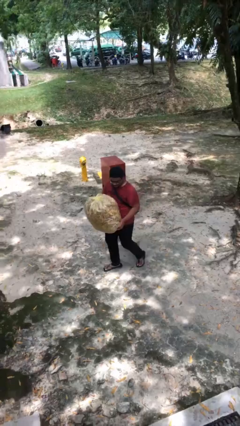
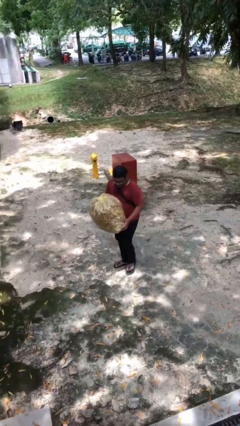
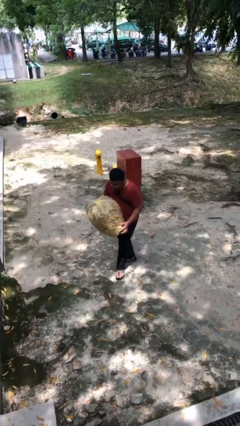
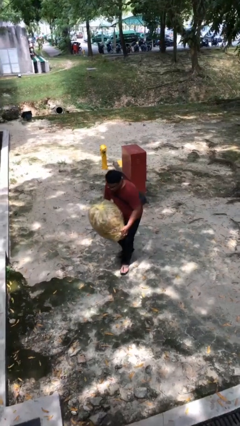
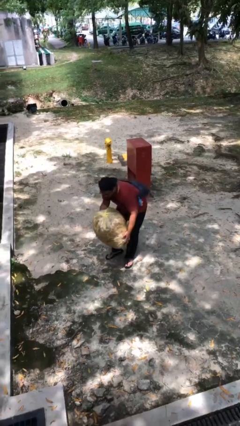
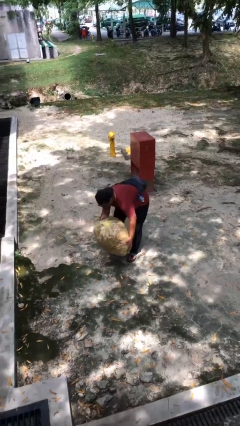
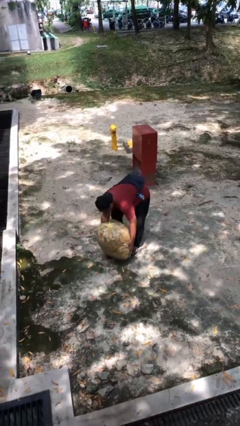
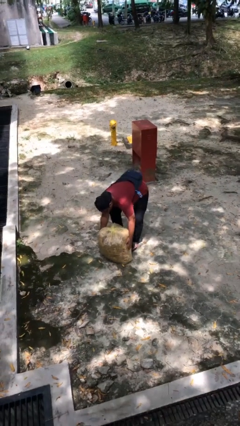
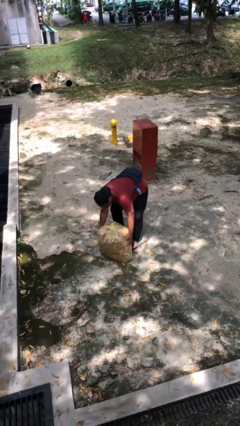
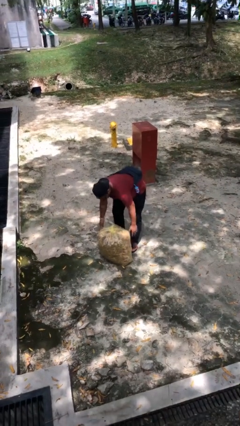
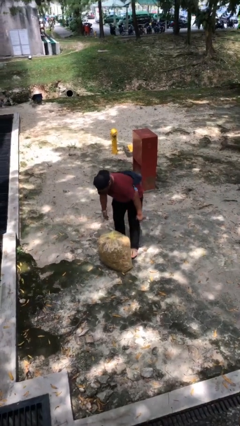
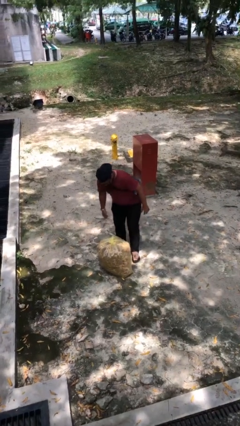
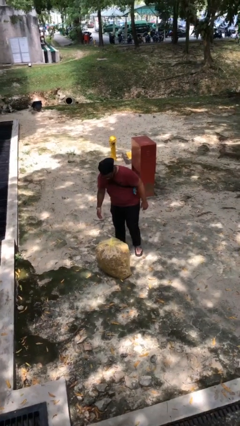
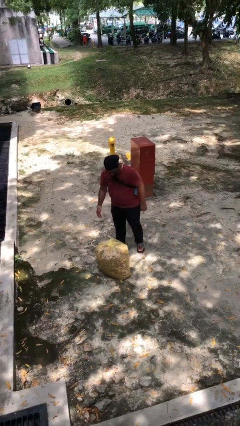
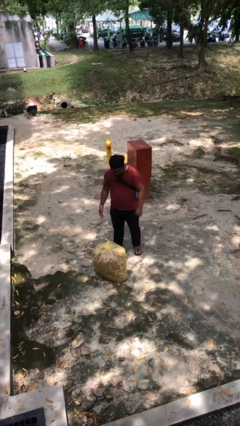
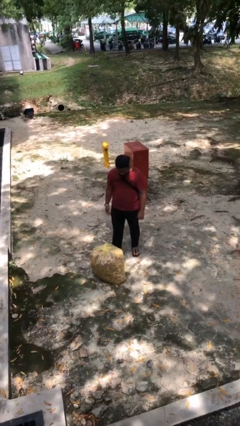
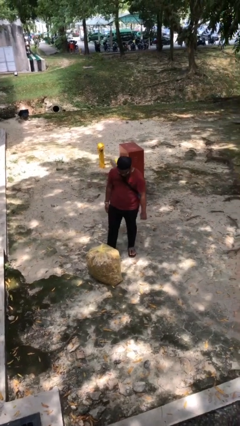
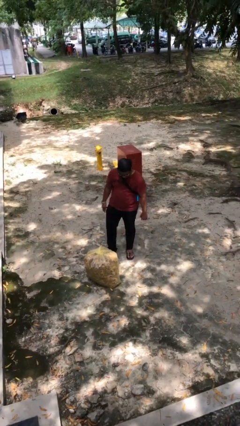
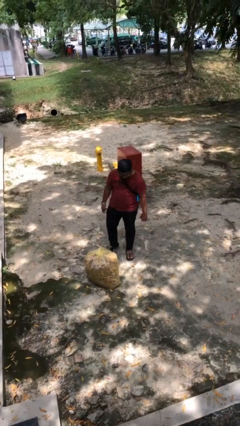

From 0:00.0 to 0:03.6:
person puts down object on floor

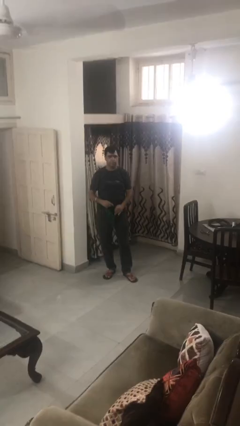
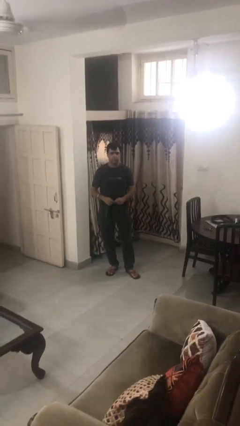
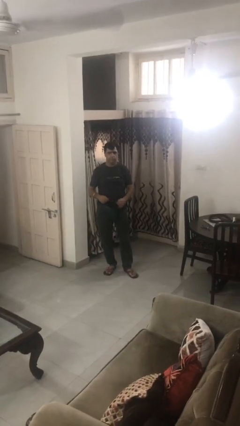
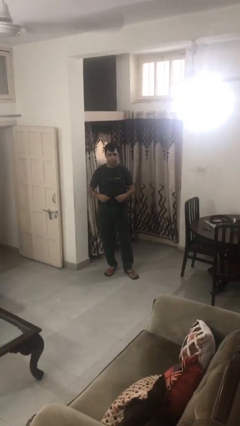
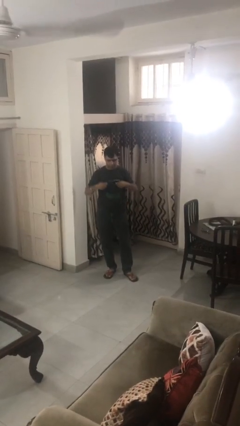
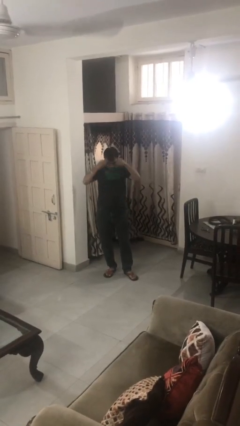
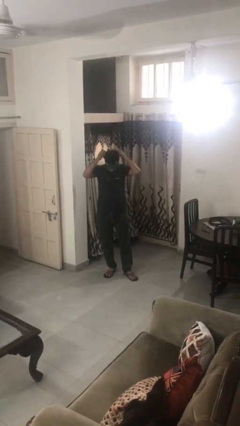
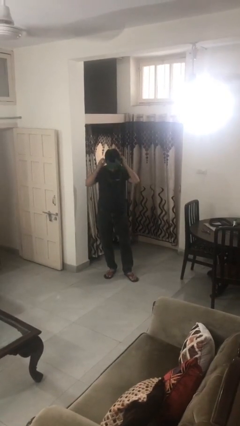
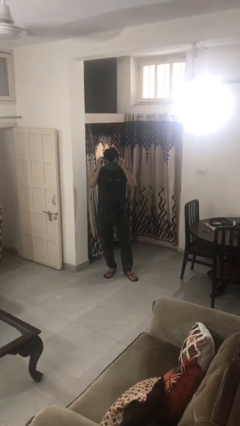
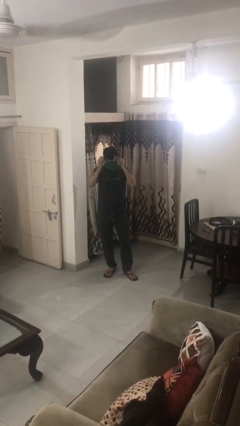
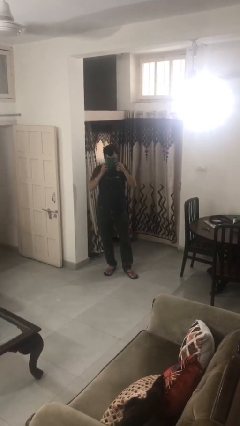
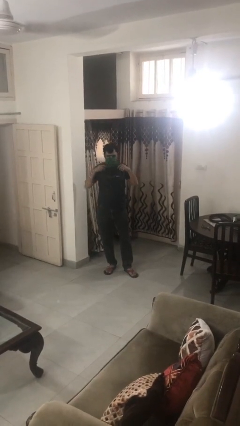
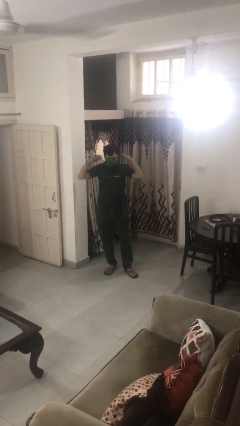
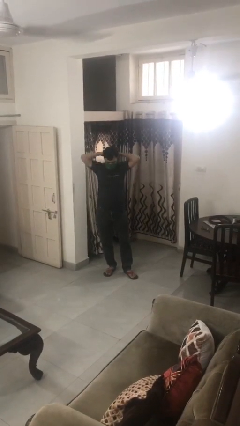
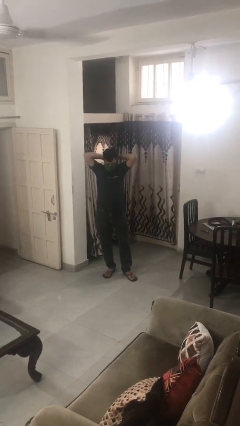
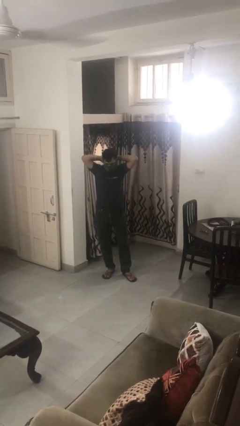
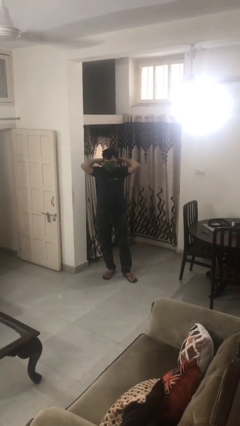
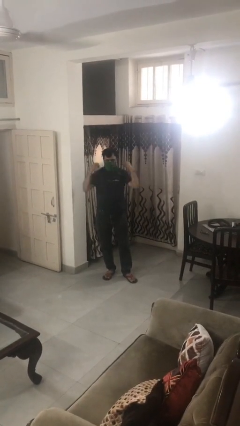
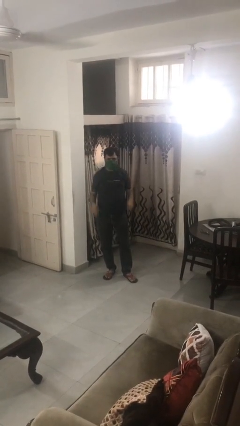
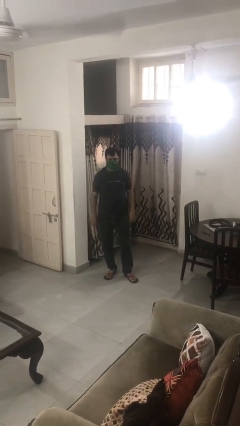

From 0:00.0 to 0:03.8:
person puts on facemask

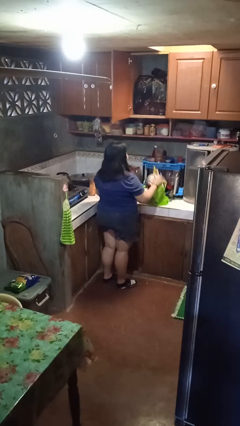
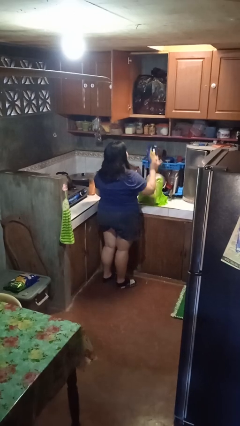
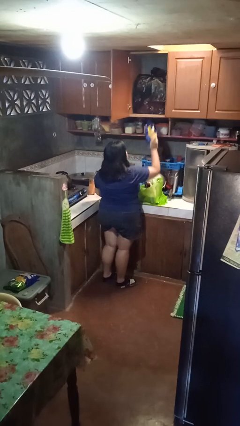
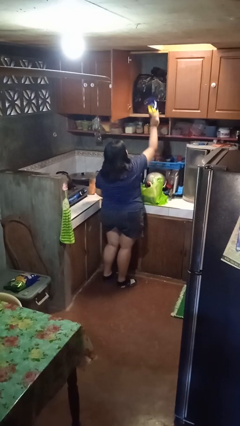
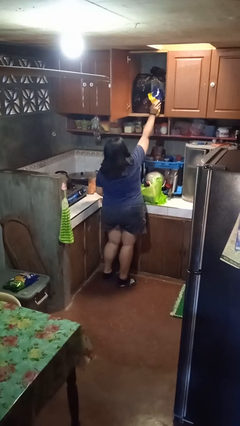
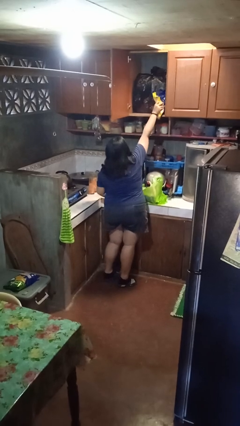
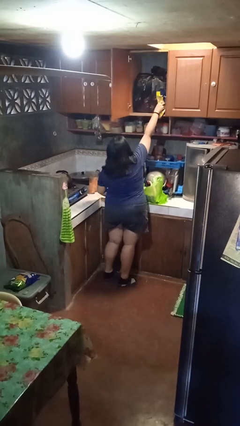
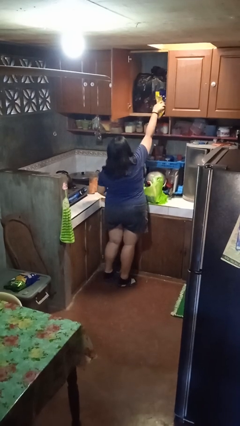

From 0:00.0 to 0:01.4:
person loads groceries into cabinet

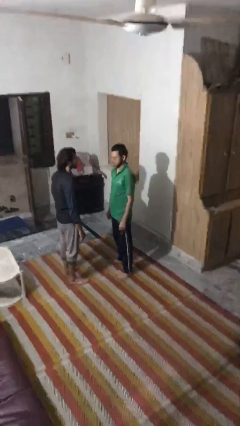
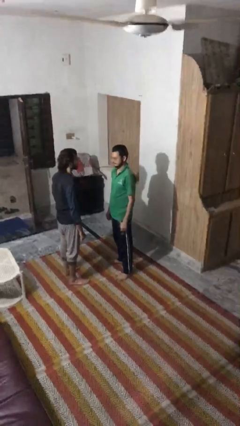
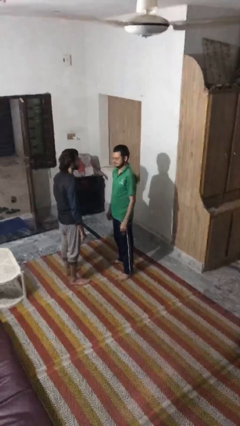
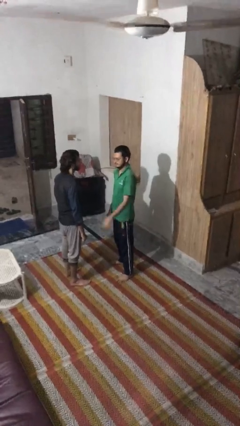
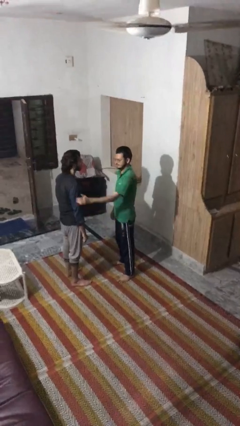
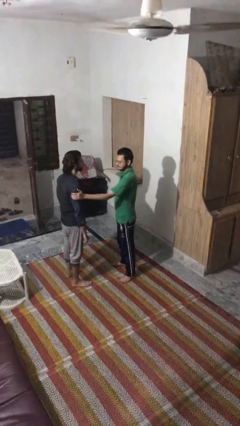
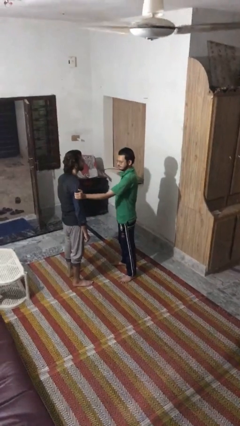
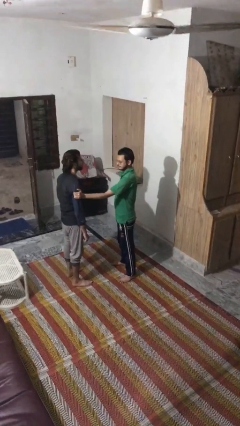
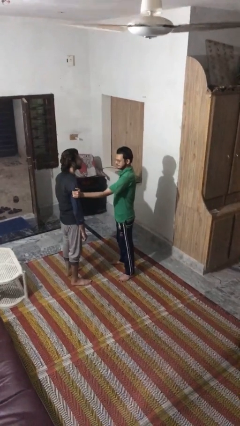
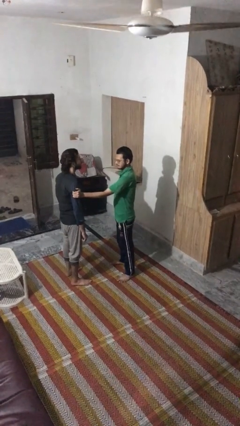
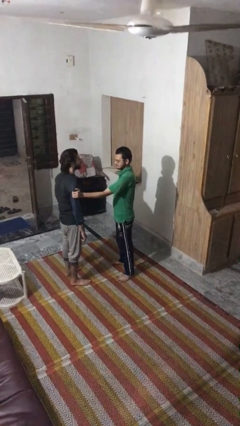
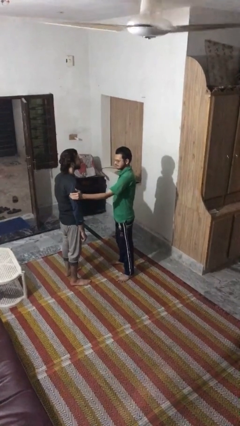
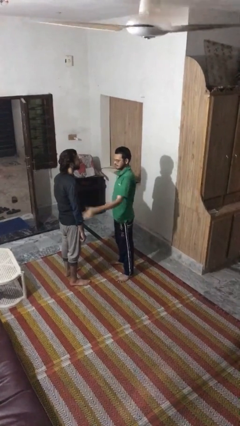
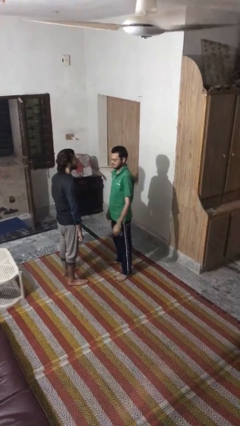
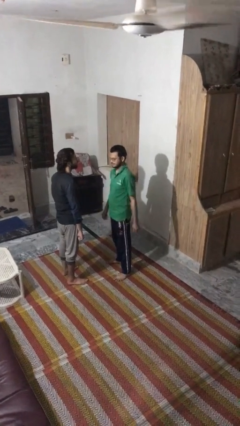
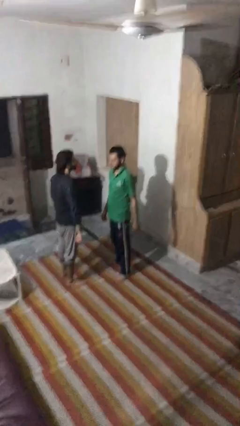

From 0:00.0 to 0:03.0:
person grabs person by bicep

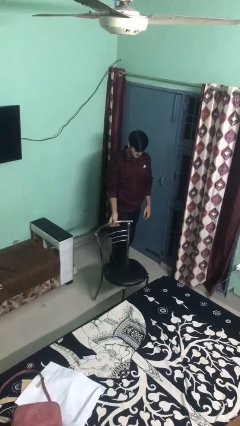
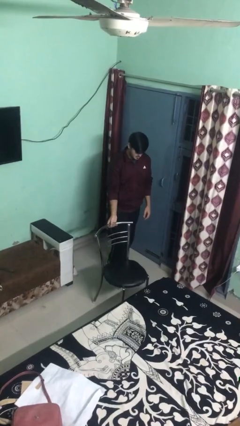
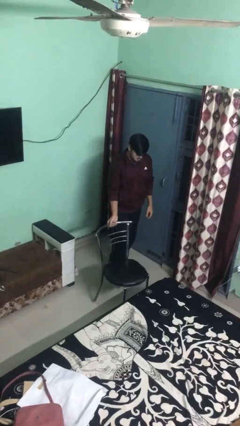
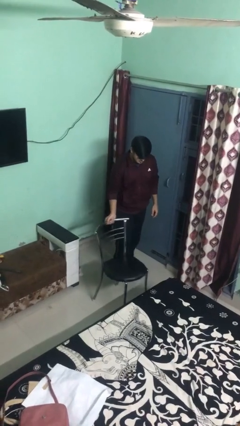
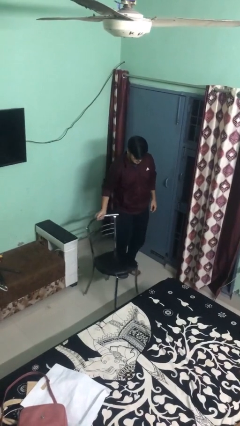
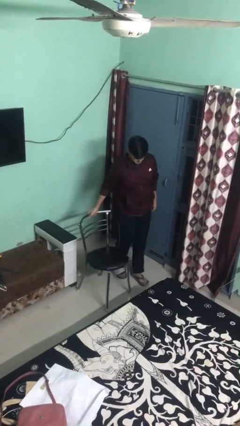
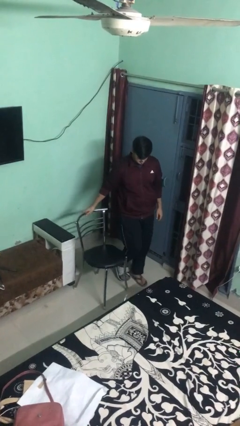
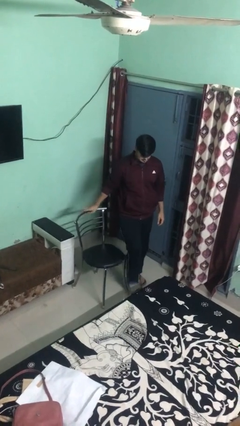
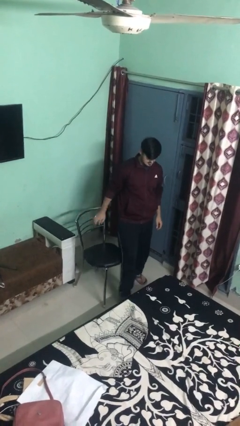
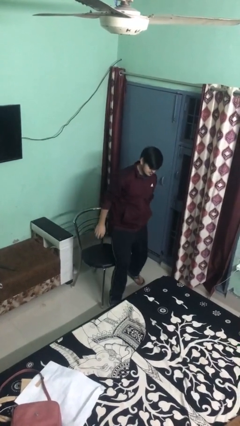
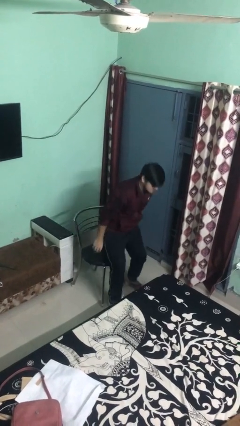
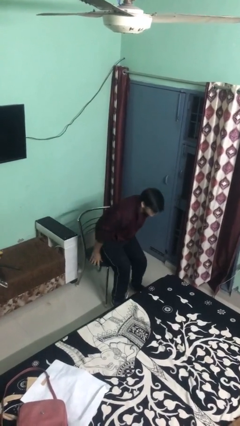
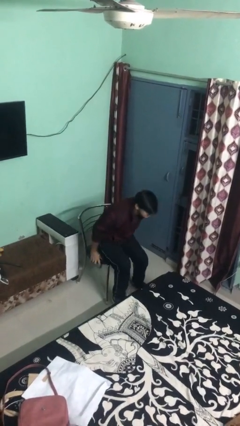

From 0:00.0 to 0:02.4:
person sits down

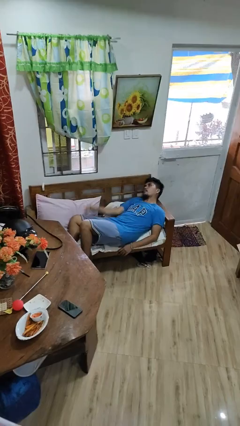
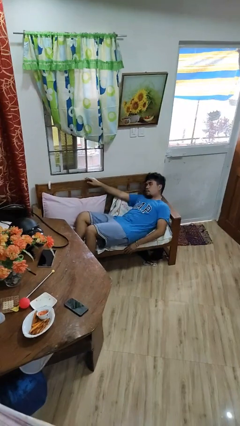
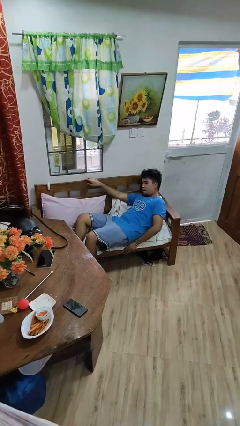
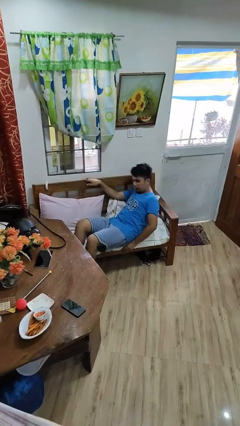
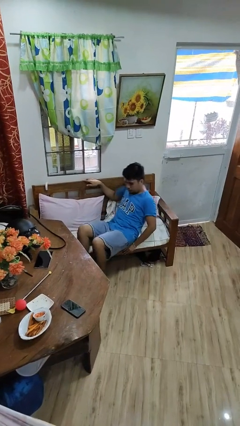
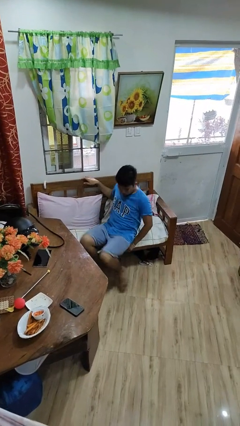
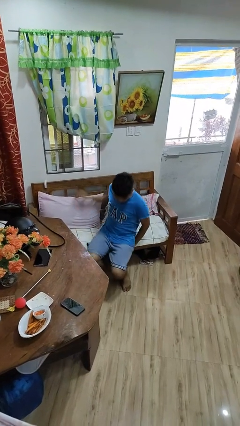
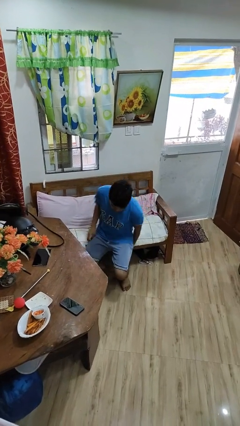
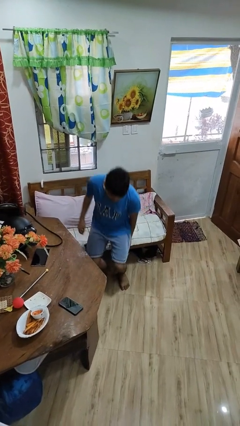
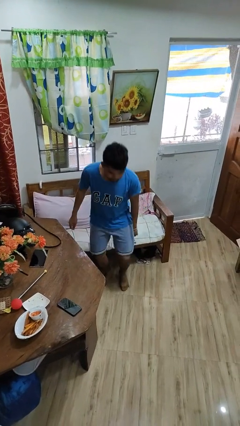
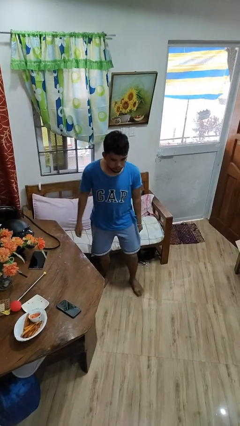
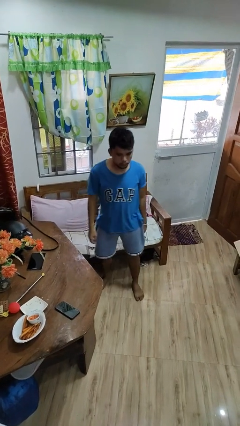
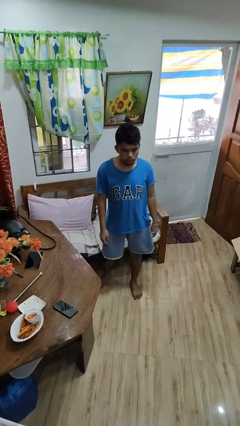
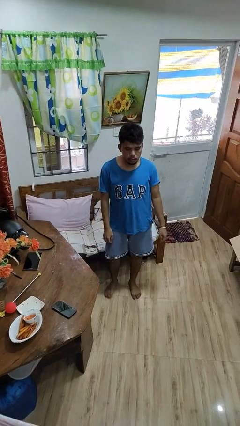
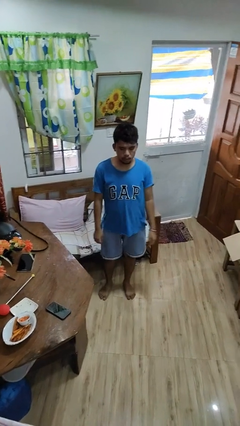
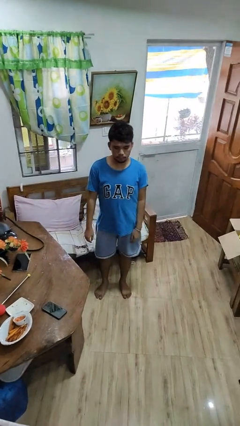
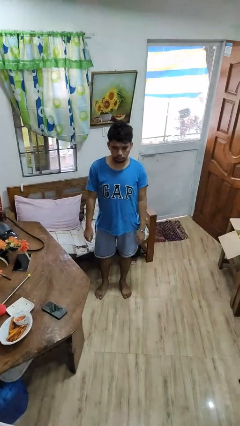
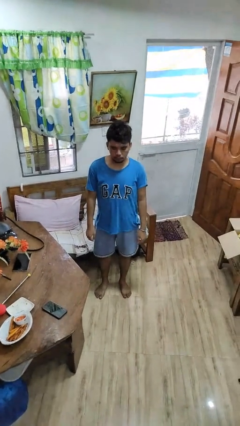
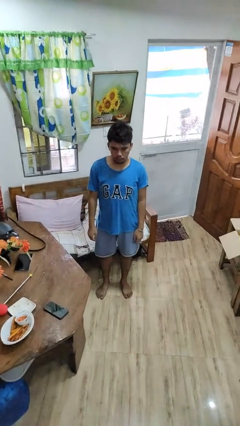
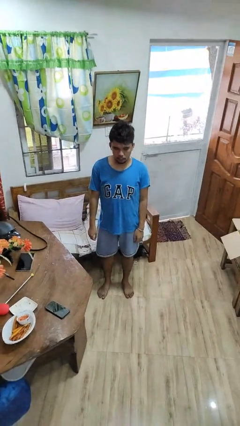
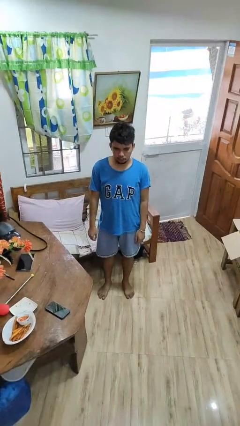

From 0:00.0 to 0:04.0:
person stands up
